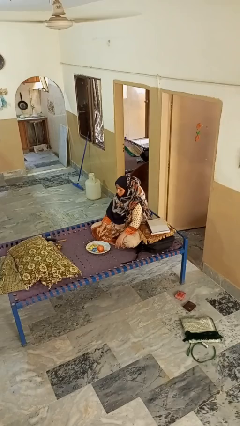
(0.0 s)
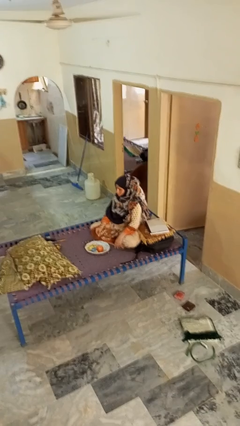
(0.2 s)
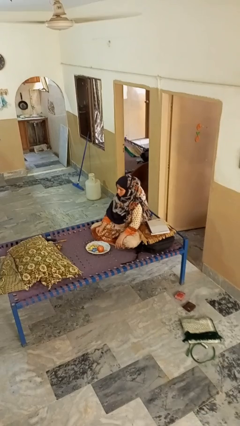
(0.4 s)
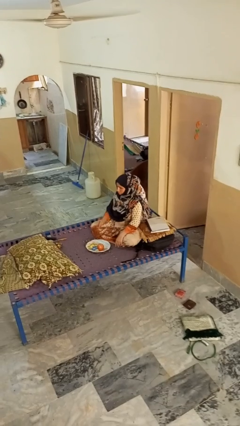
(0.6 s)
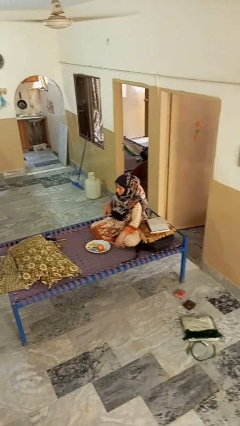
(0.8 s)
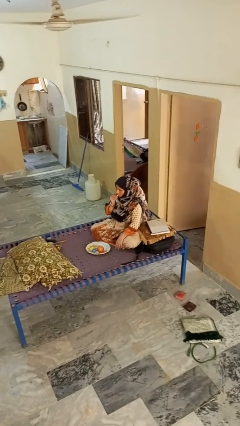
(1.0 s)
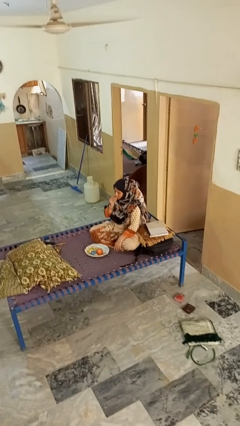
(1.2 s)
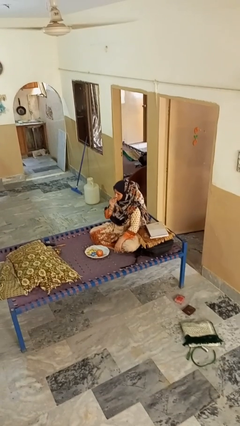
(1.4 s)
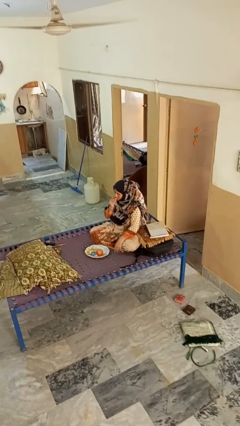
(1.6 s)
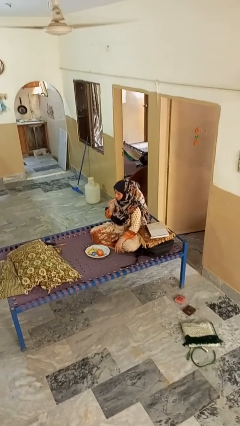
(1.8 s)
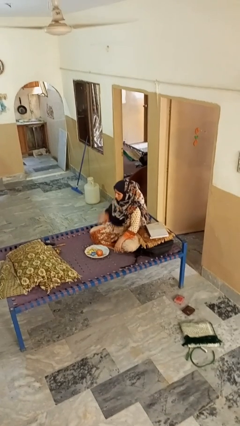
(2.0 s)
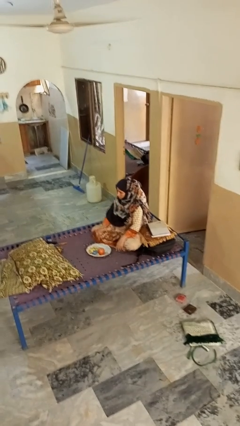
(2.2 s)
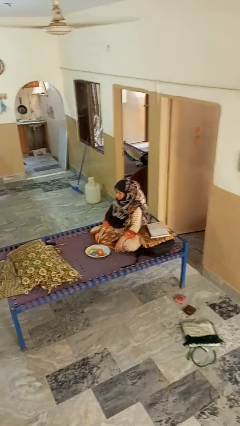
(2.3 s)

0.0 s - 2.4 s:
person eats apple

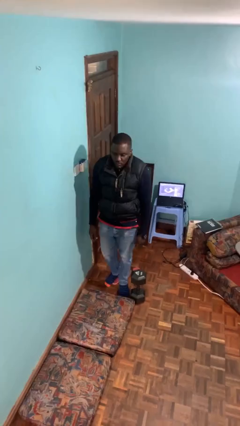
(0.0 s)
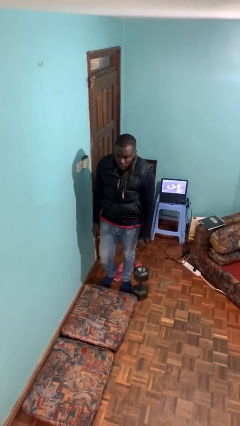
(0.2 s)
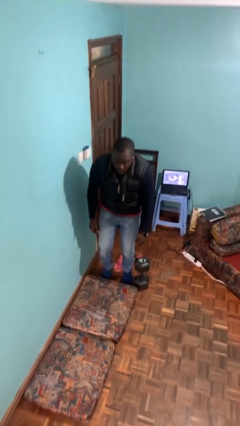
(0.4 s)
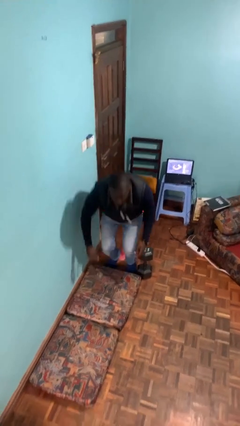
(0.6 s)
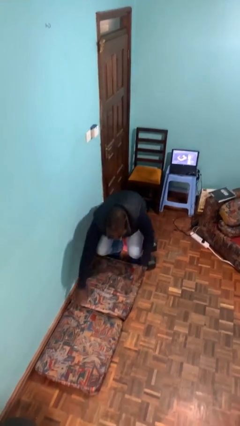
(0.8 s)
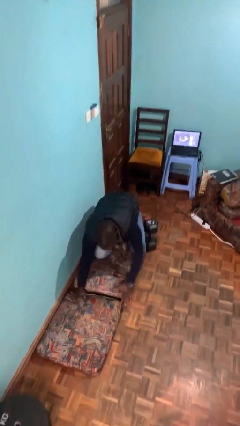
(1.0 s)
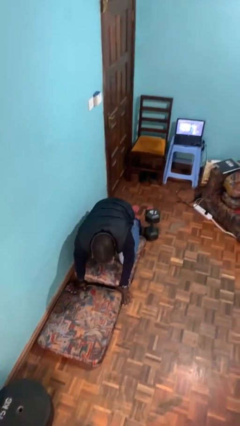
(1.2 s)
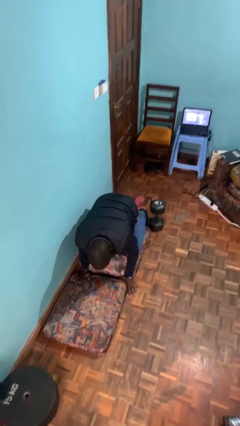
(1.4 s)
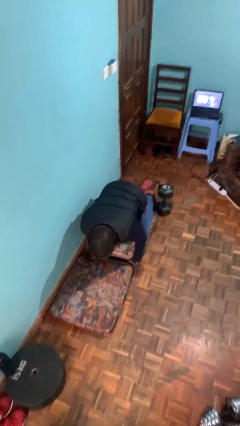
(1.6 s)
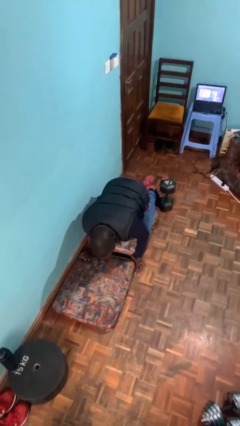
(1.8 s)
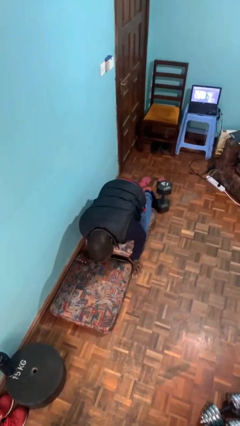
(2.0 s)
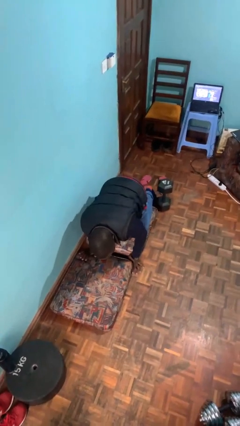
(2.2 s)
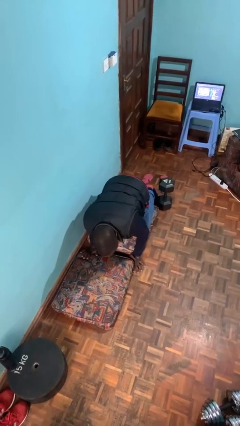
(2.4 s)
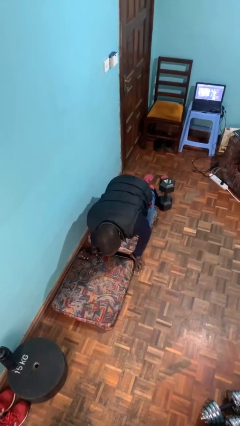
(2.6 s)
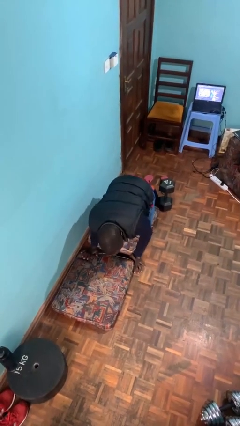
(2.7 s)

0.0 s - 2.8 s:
person trips on object on floor

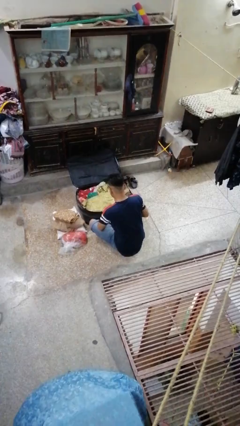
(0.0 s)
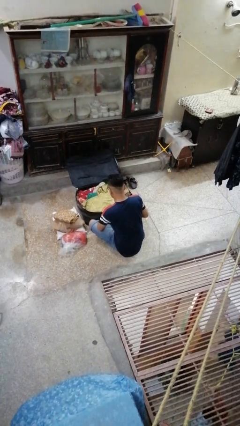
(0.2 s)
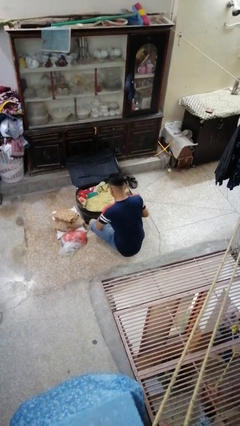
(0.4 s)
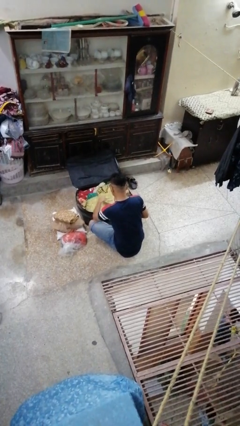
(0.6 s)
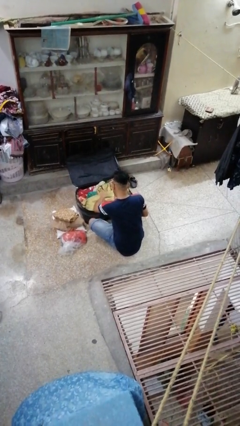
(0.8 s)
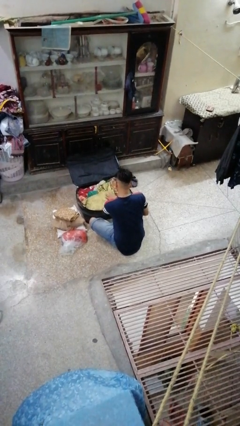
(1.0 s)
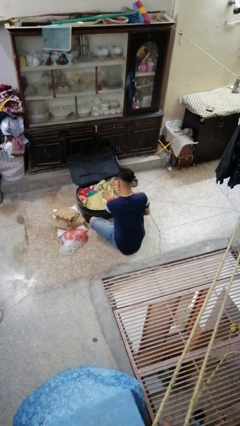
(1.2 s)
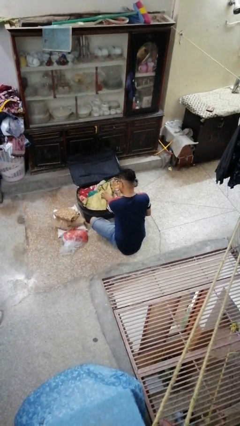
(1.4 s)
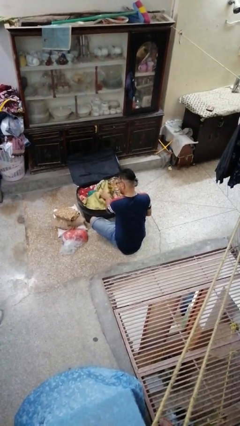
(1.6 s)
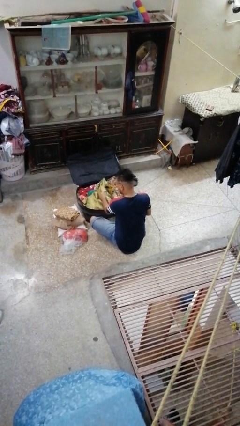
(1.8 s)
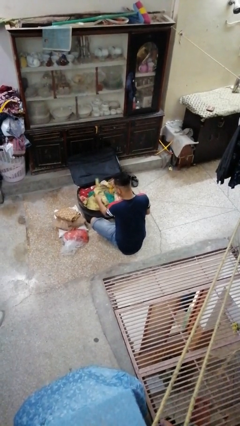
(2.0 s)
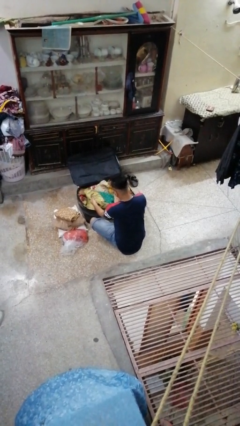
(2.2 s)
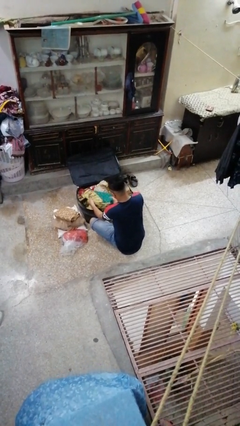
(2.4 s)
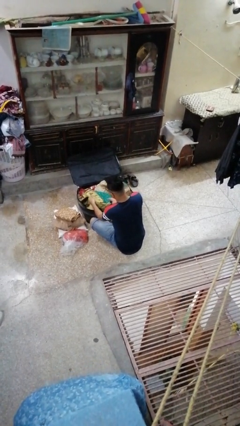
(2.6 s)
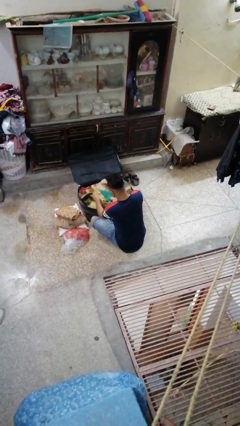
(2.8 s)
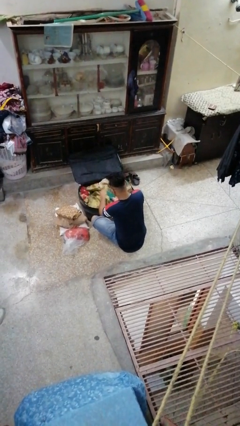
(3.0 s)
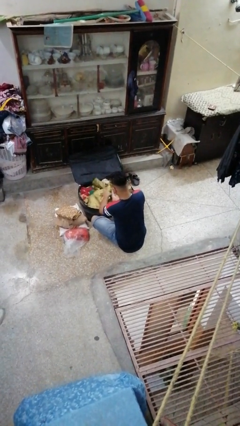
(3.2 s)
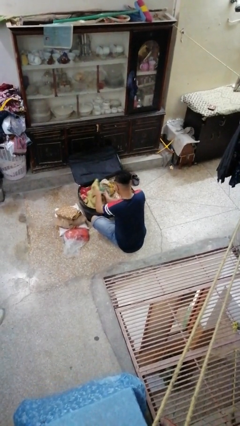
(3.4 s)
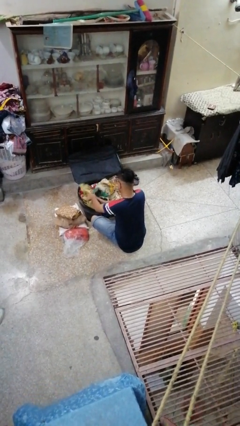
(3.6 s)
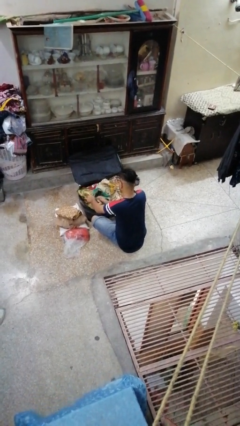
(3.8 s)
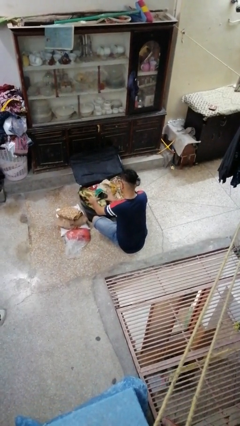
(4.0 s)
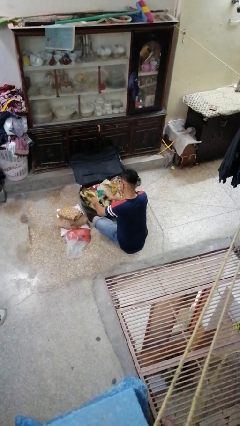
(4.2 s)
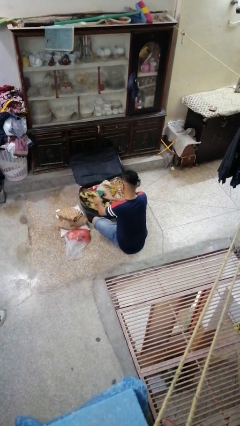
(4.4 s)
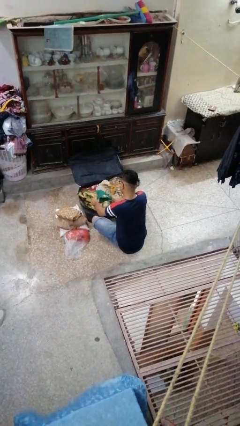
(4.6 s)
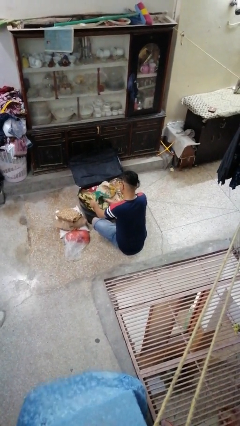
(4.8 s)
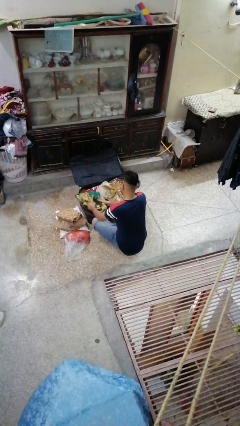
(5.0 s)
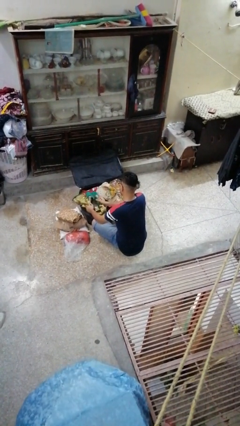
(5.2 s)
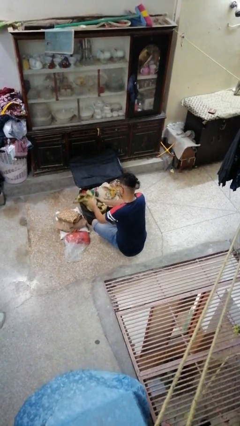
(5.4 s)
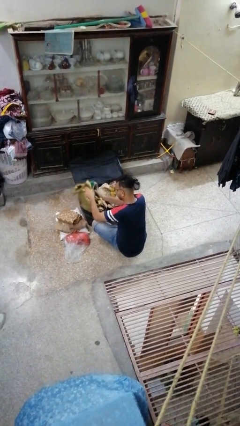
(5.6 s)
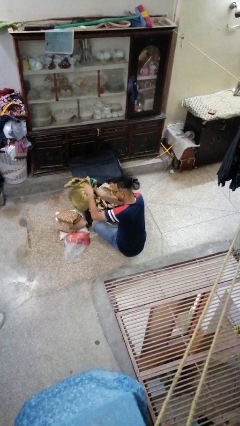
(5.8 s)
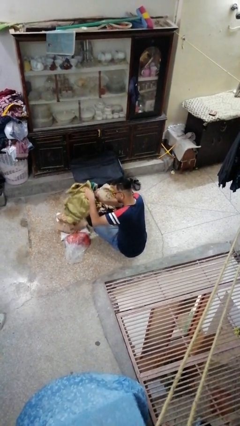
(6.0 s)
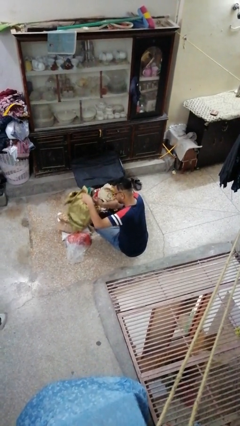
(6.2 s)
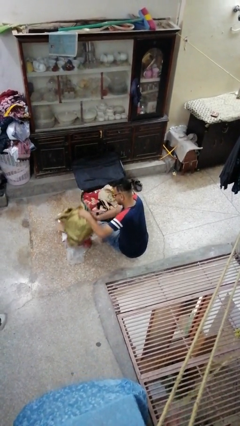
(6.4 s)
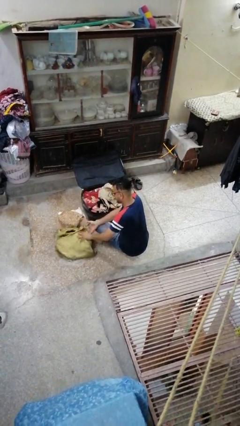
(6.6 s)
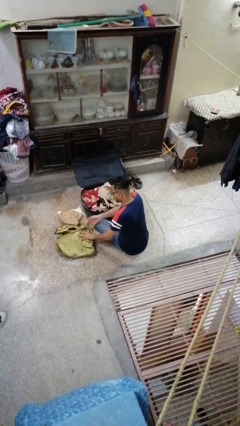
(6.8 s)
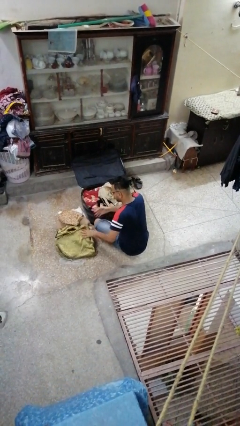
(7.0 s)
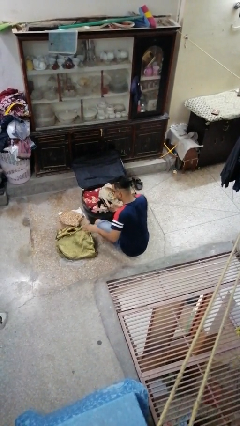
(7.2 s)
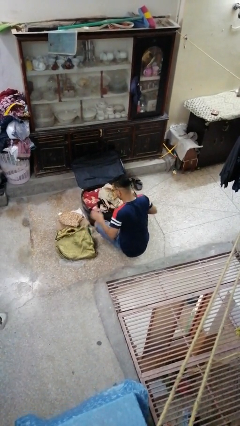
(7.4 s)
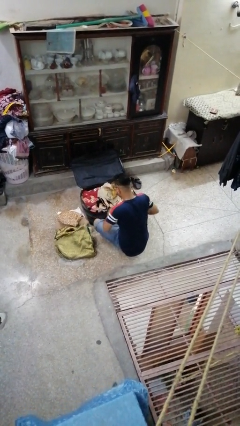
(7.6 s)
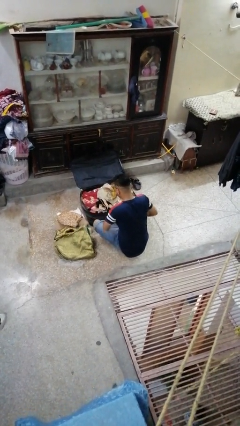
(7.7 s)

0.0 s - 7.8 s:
person unloads clothes from suitcase

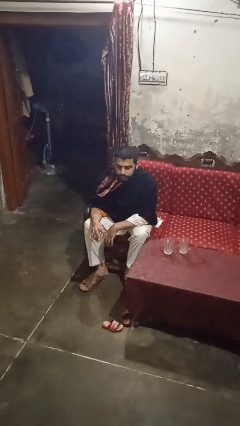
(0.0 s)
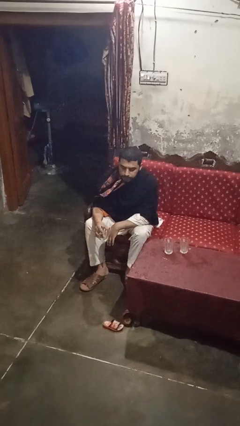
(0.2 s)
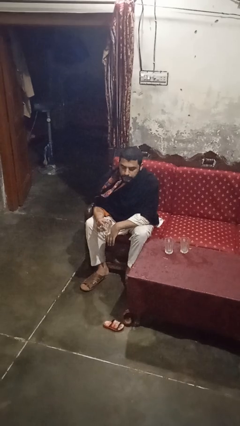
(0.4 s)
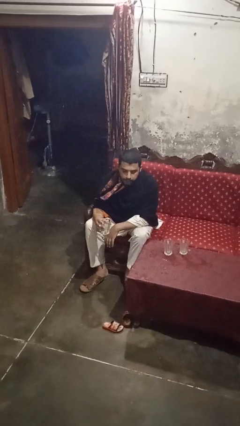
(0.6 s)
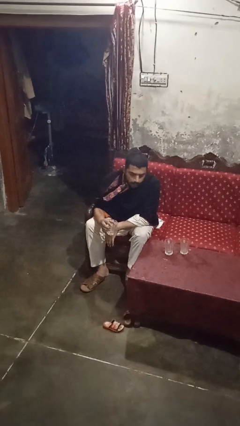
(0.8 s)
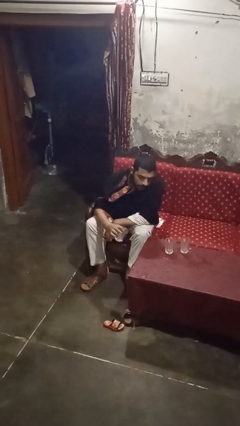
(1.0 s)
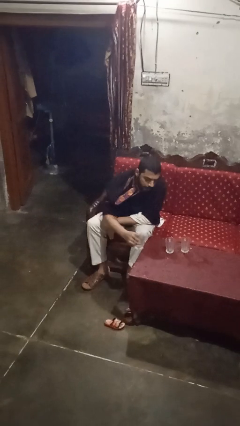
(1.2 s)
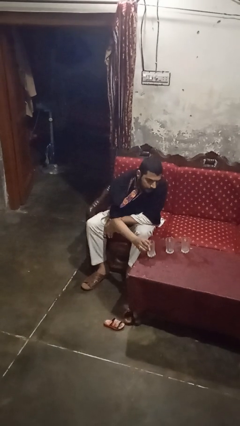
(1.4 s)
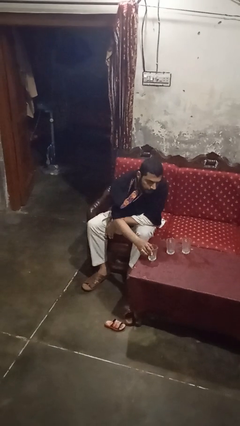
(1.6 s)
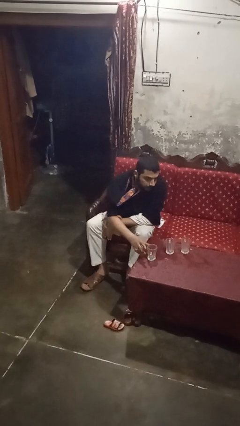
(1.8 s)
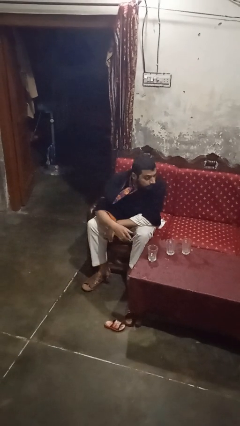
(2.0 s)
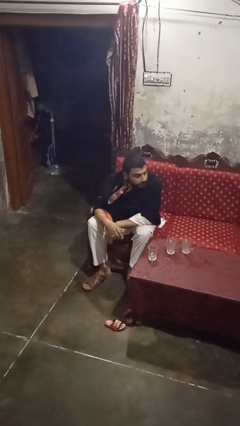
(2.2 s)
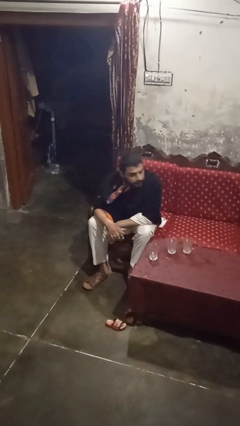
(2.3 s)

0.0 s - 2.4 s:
person puts down object on table

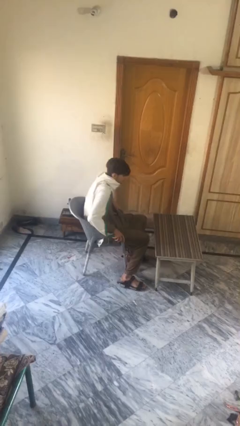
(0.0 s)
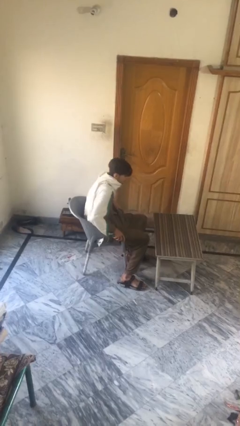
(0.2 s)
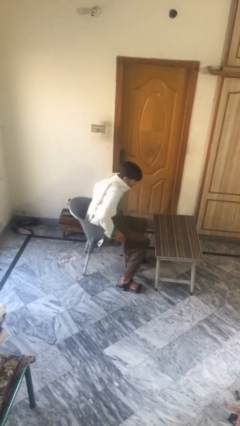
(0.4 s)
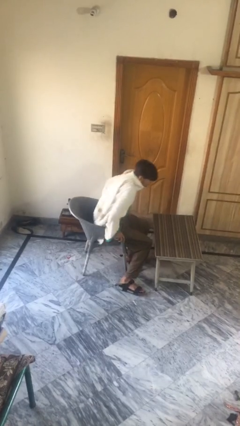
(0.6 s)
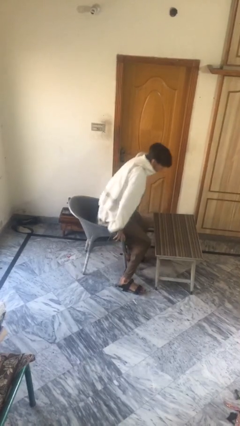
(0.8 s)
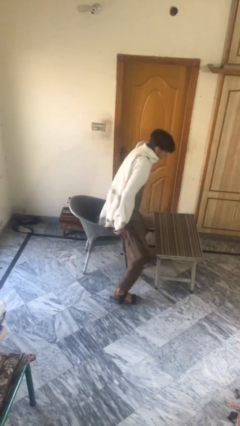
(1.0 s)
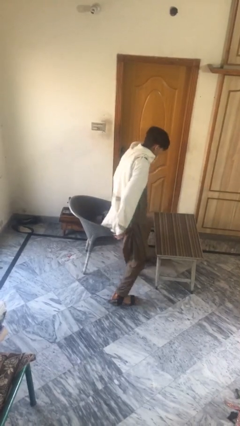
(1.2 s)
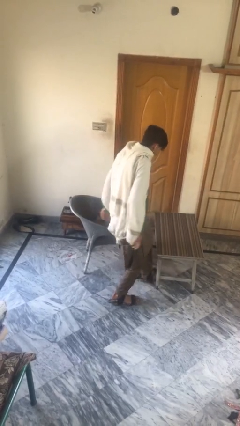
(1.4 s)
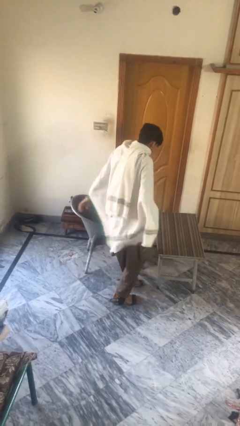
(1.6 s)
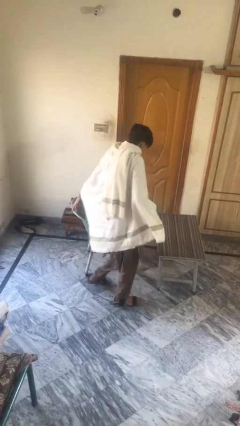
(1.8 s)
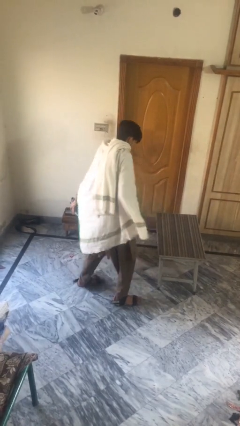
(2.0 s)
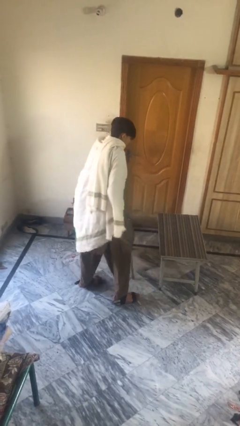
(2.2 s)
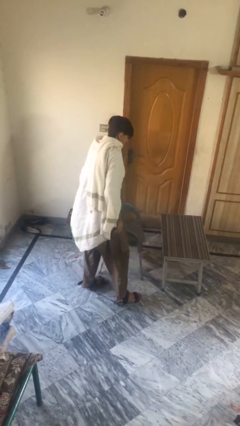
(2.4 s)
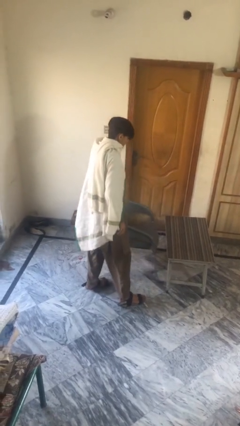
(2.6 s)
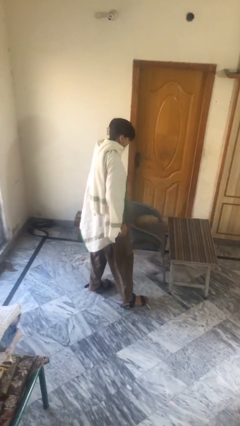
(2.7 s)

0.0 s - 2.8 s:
person stands up
